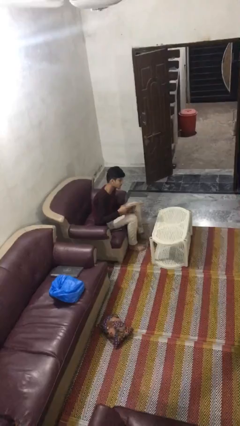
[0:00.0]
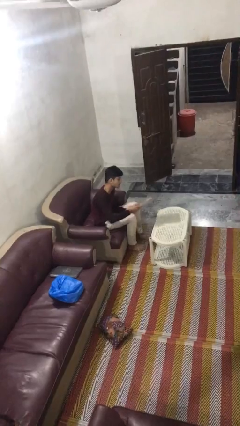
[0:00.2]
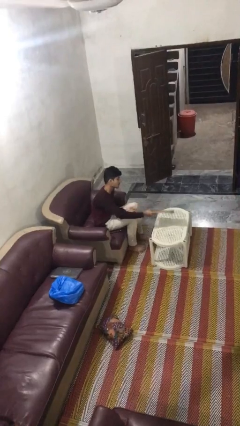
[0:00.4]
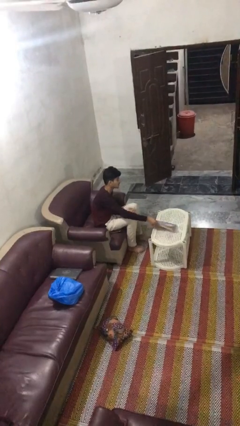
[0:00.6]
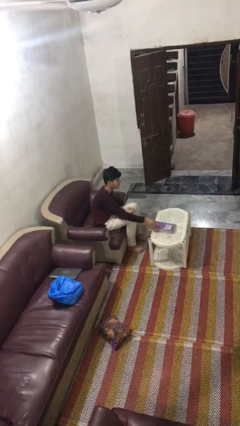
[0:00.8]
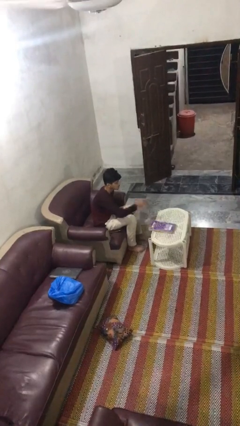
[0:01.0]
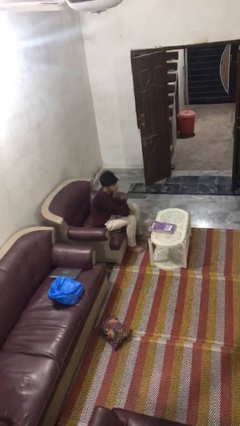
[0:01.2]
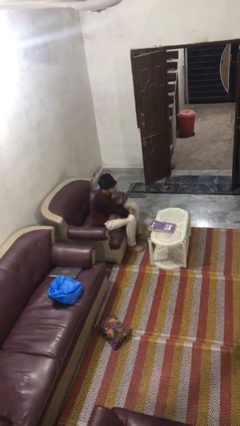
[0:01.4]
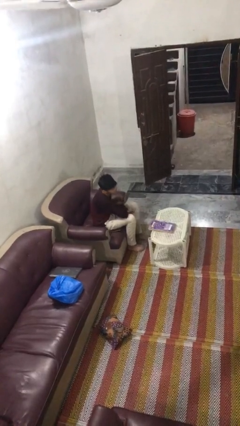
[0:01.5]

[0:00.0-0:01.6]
person puts down object on table

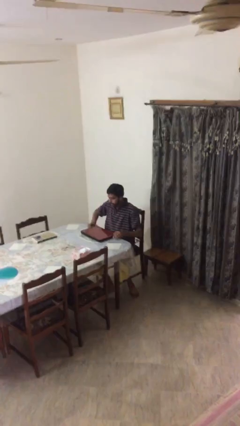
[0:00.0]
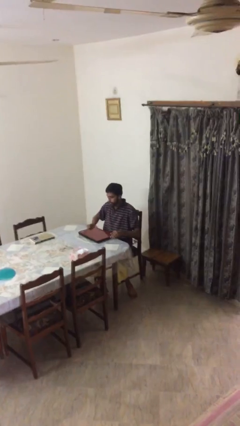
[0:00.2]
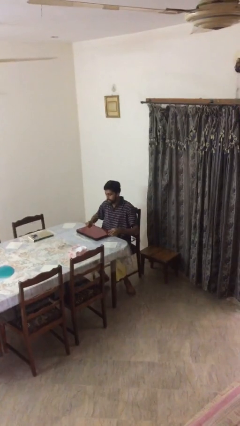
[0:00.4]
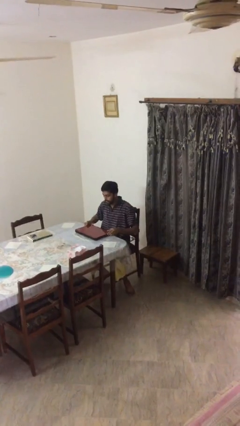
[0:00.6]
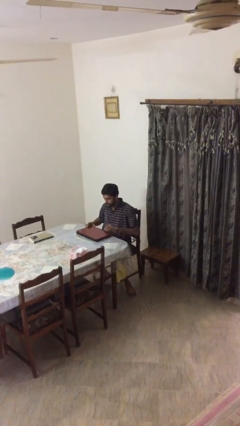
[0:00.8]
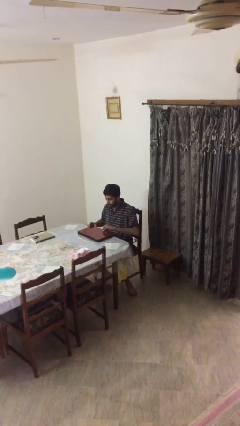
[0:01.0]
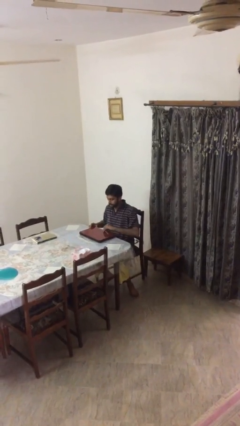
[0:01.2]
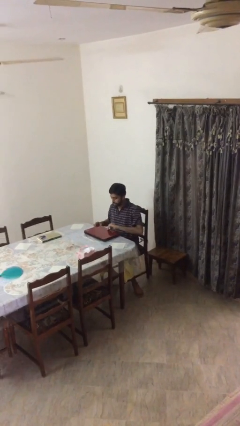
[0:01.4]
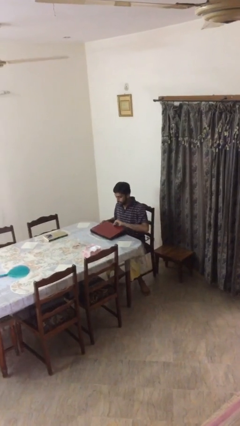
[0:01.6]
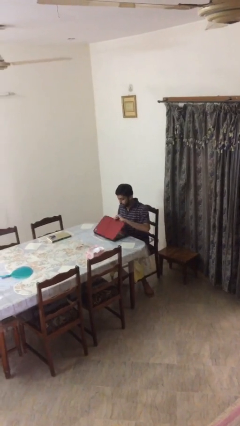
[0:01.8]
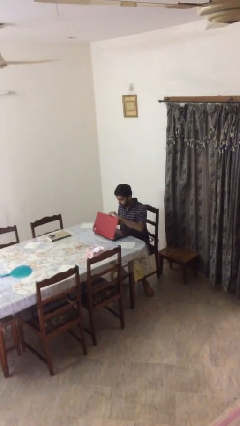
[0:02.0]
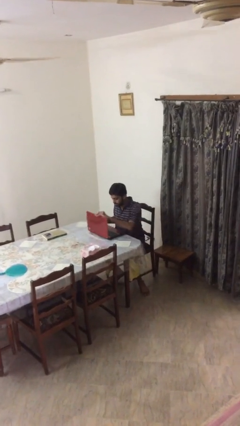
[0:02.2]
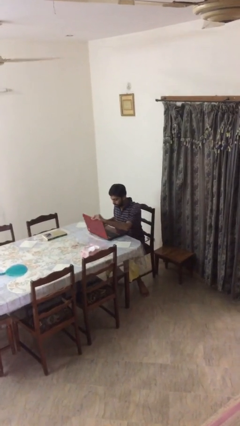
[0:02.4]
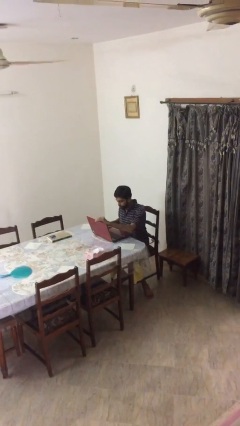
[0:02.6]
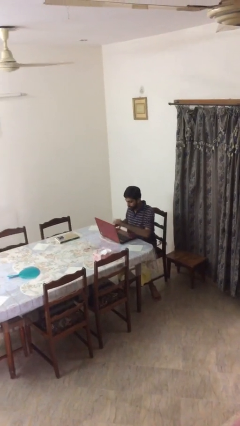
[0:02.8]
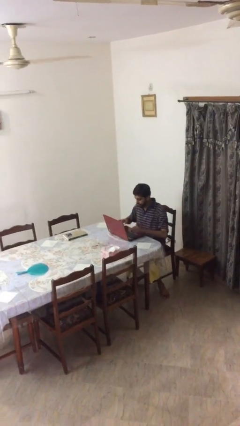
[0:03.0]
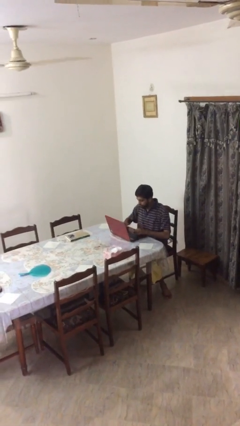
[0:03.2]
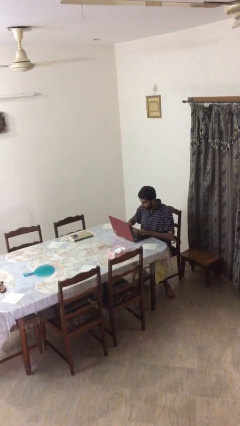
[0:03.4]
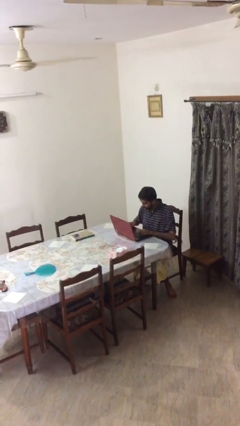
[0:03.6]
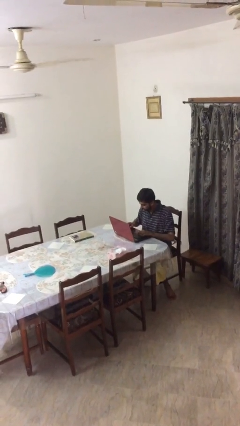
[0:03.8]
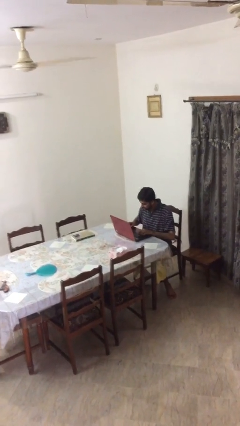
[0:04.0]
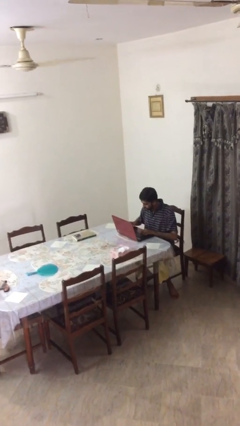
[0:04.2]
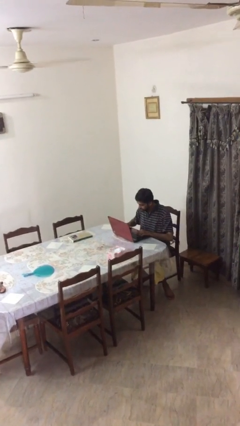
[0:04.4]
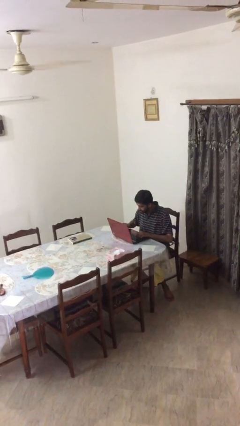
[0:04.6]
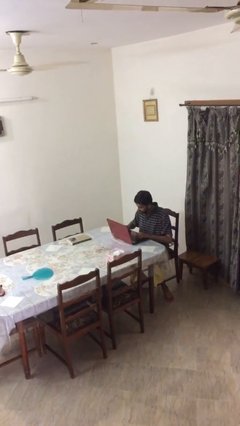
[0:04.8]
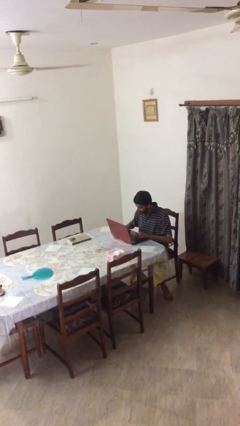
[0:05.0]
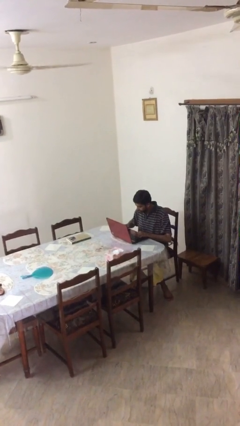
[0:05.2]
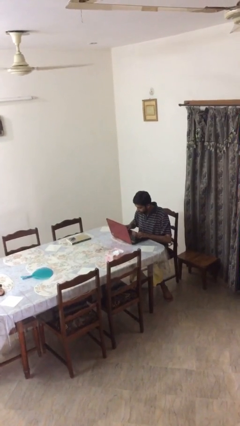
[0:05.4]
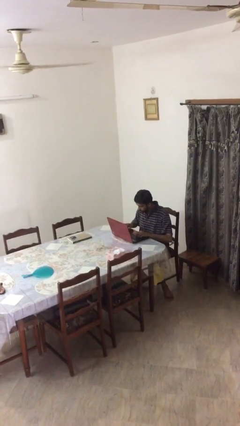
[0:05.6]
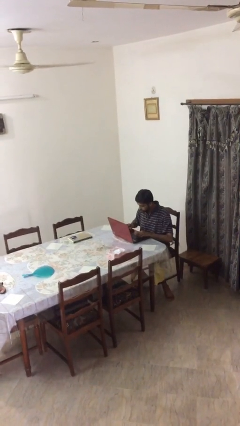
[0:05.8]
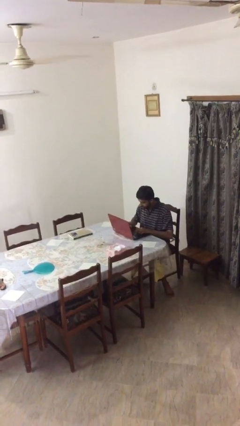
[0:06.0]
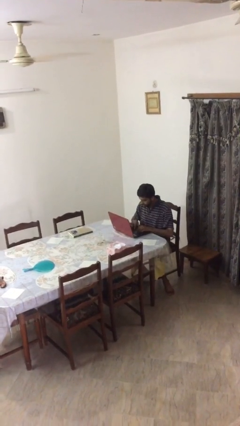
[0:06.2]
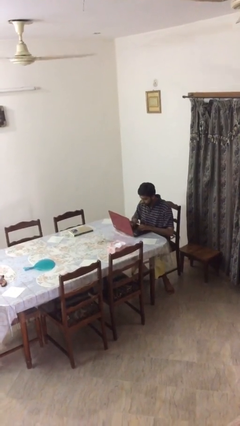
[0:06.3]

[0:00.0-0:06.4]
person interacts with laptop

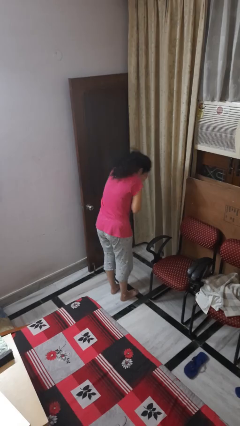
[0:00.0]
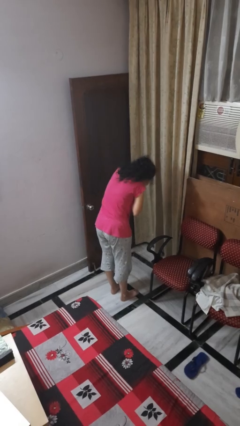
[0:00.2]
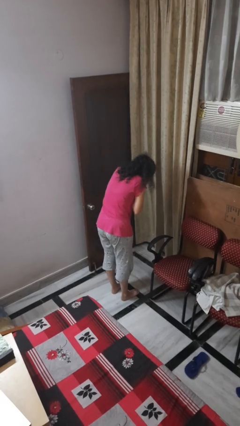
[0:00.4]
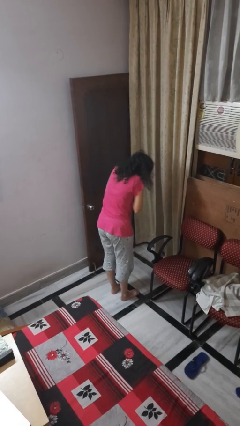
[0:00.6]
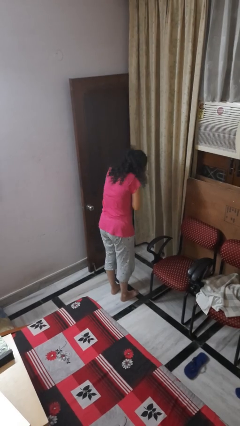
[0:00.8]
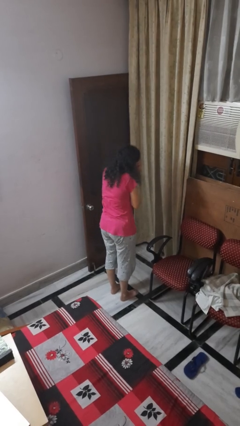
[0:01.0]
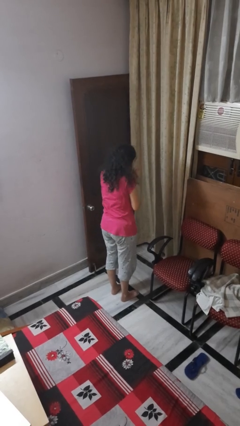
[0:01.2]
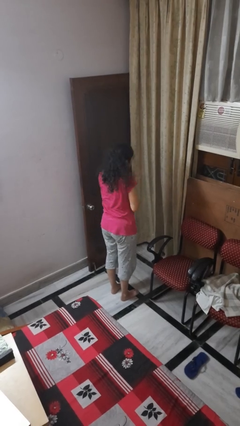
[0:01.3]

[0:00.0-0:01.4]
person sneezes into hand

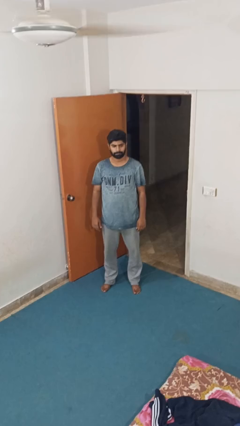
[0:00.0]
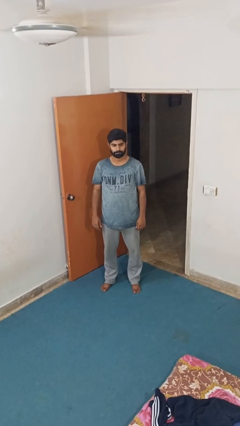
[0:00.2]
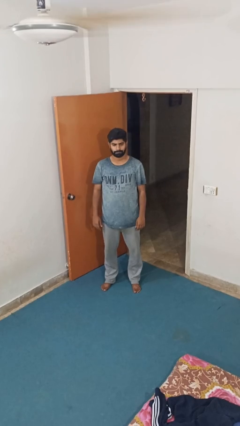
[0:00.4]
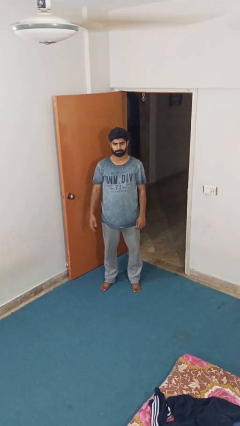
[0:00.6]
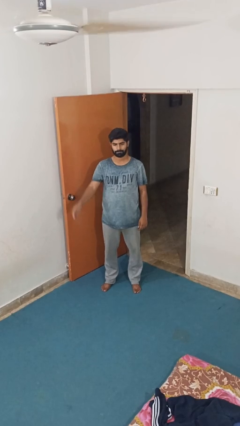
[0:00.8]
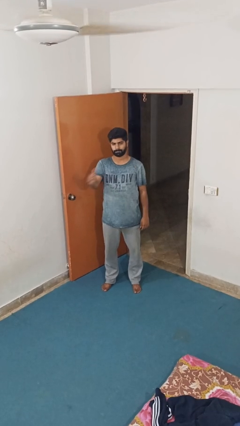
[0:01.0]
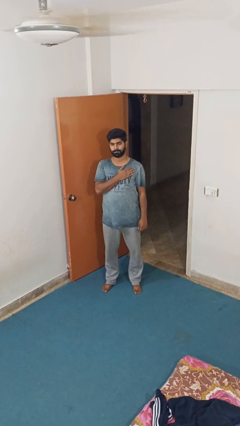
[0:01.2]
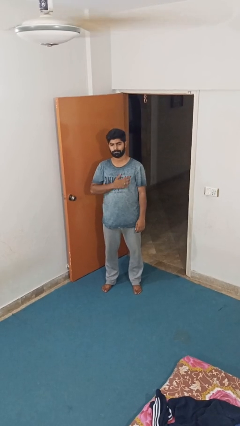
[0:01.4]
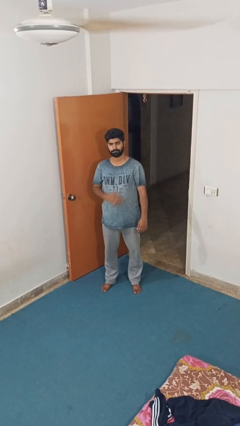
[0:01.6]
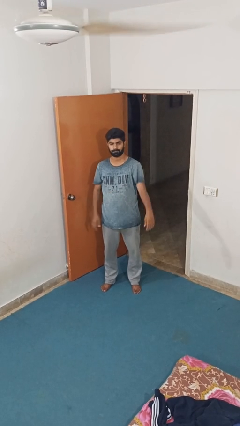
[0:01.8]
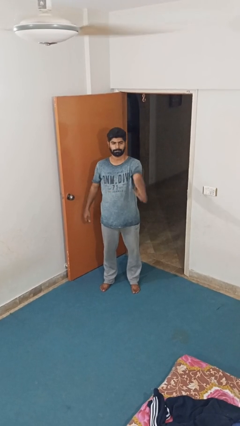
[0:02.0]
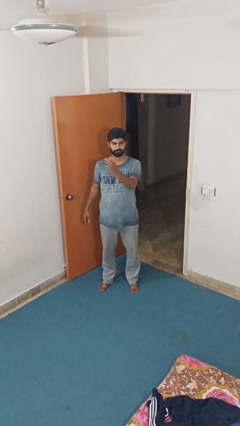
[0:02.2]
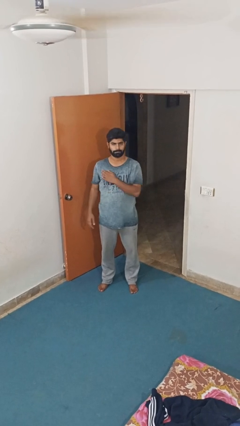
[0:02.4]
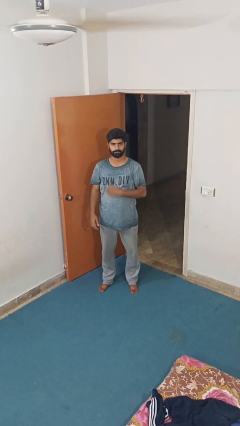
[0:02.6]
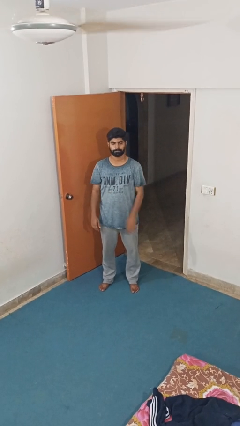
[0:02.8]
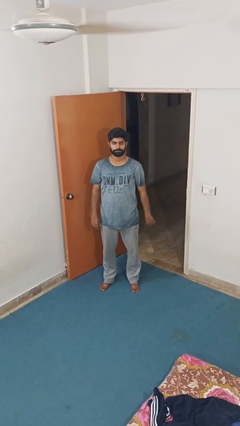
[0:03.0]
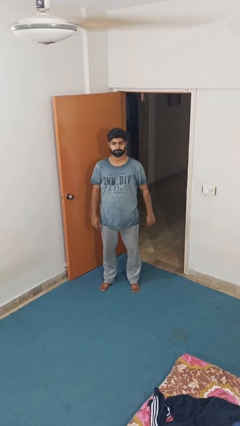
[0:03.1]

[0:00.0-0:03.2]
person drums on chest

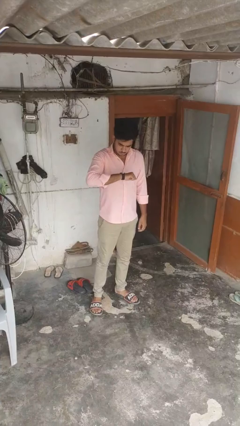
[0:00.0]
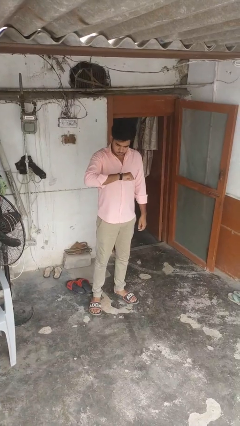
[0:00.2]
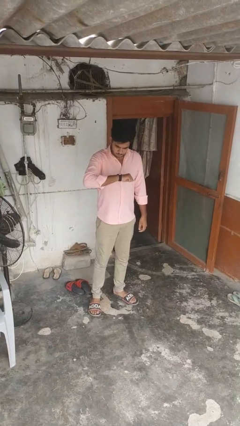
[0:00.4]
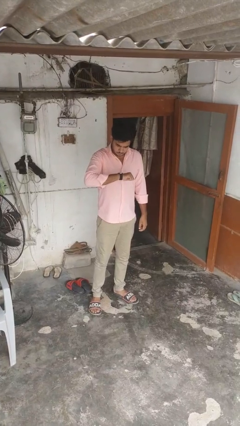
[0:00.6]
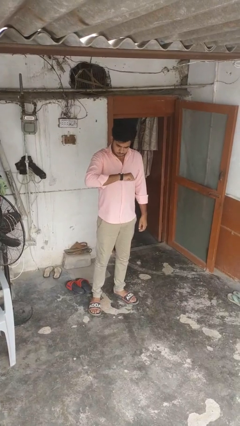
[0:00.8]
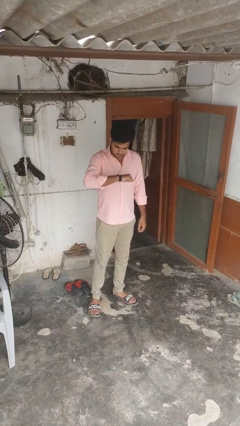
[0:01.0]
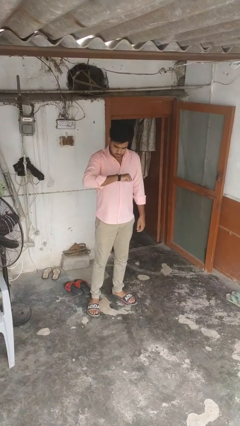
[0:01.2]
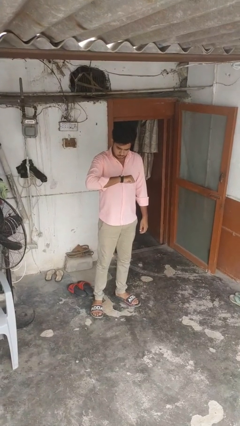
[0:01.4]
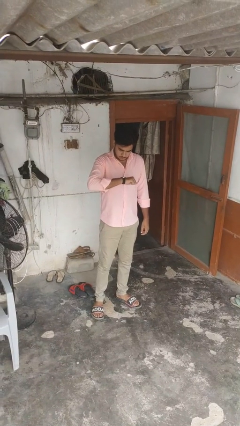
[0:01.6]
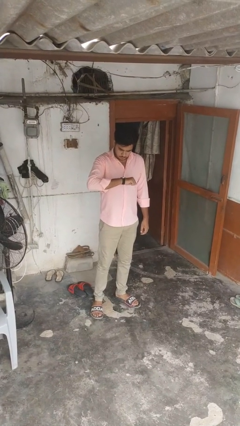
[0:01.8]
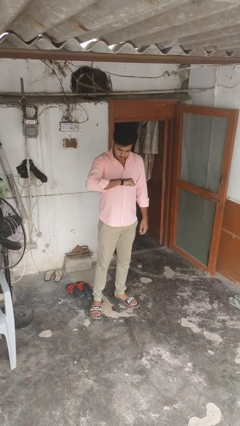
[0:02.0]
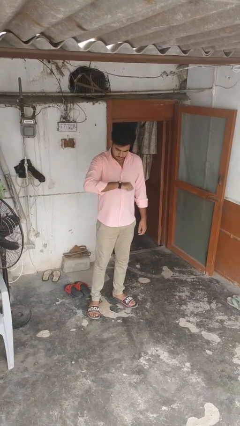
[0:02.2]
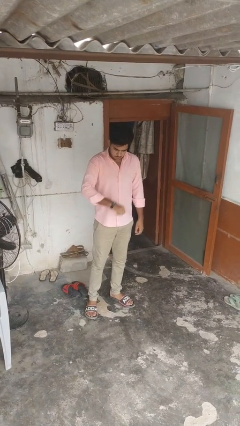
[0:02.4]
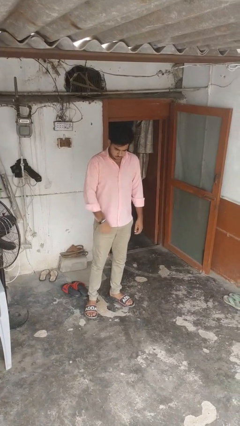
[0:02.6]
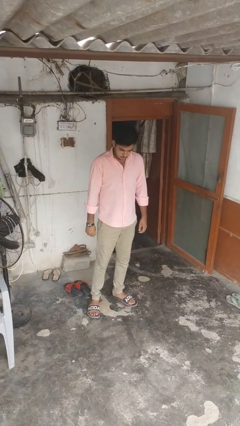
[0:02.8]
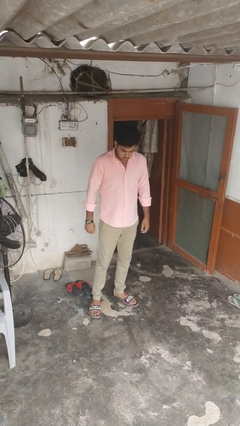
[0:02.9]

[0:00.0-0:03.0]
person looks at wristwatch

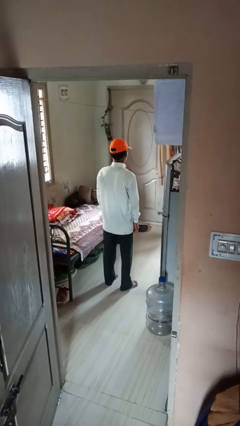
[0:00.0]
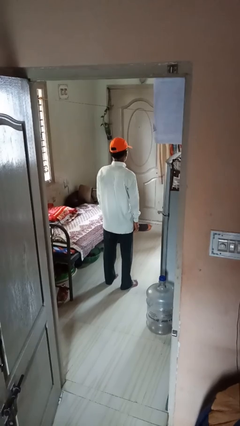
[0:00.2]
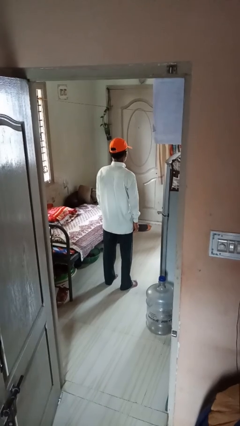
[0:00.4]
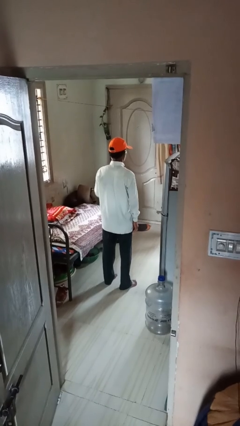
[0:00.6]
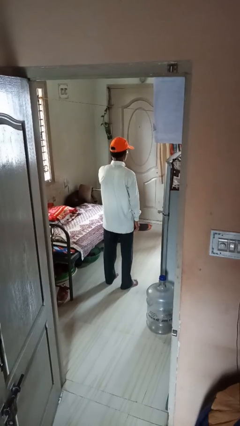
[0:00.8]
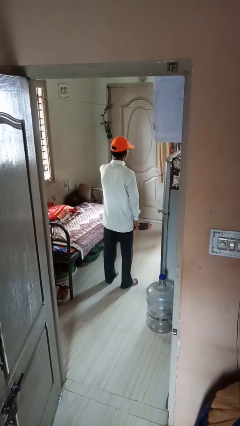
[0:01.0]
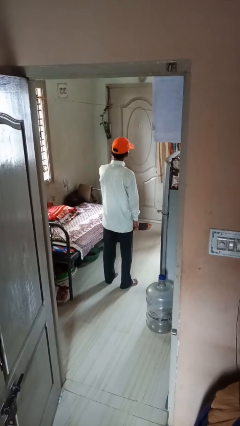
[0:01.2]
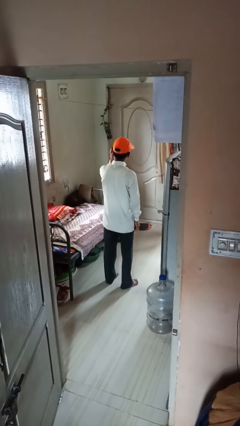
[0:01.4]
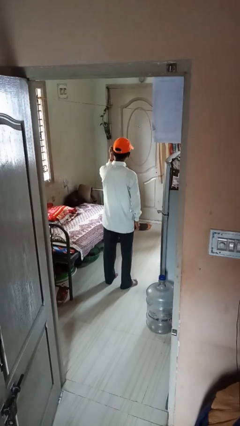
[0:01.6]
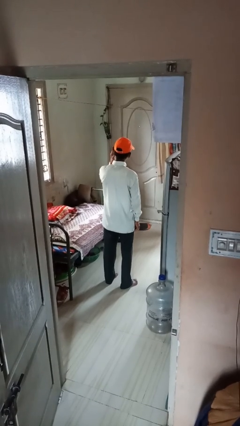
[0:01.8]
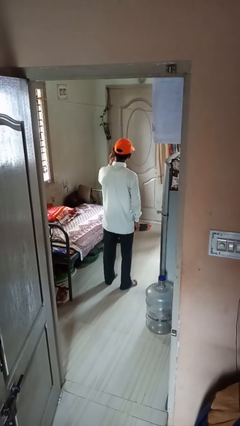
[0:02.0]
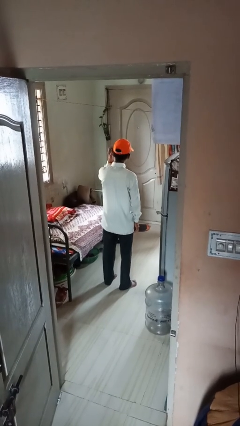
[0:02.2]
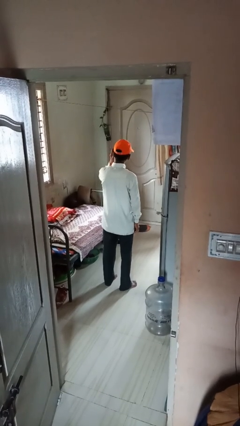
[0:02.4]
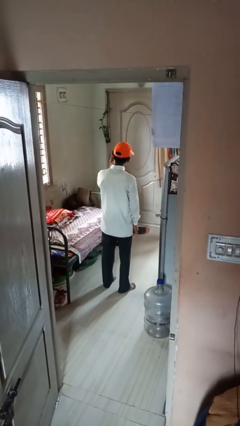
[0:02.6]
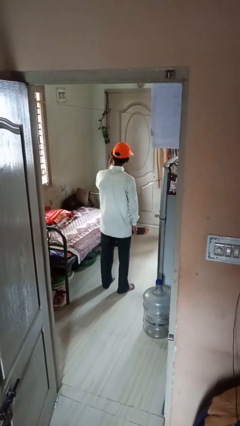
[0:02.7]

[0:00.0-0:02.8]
person scratches face
